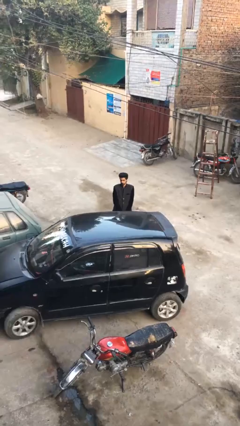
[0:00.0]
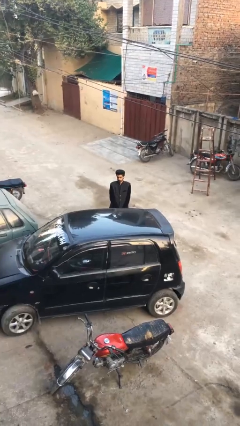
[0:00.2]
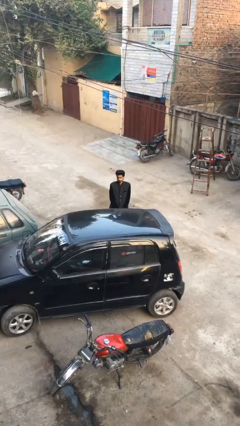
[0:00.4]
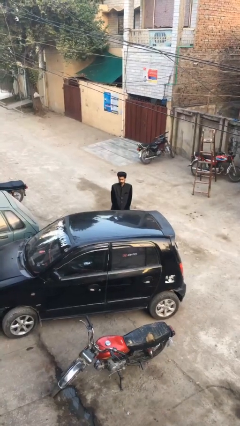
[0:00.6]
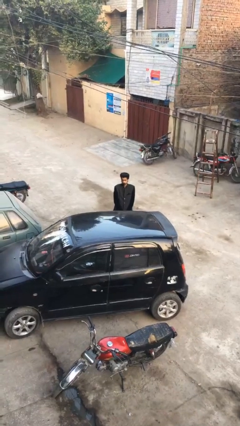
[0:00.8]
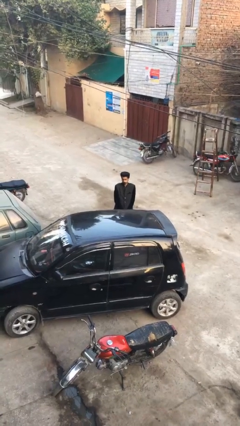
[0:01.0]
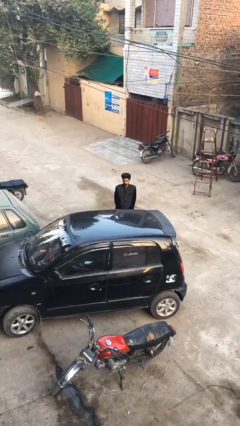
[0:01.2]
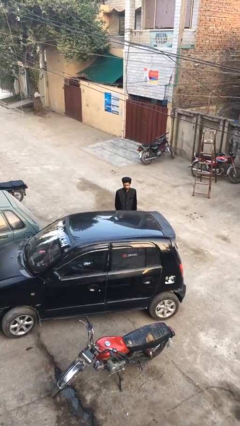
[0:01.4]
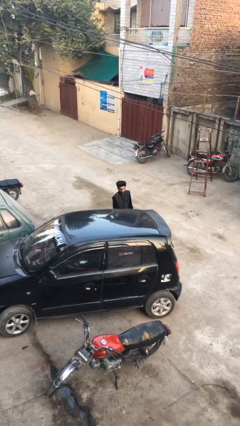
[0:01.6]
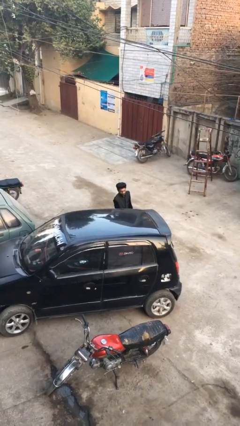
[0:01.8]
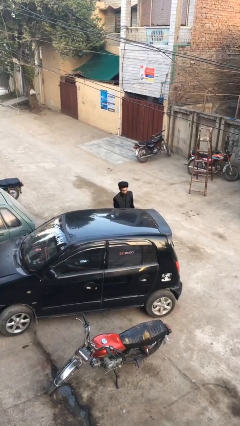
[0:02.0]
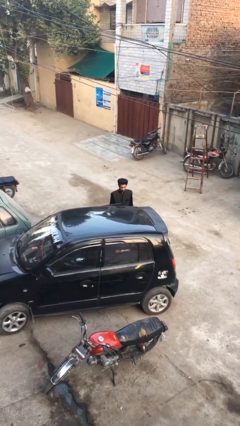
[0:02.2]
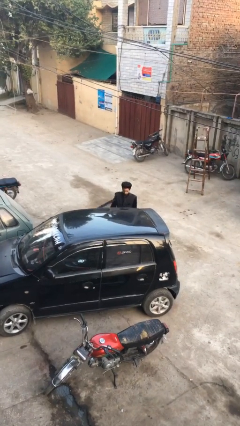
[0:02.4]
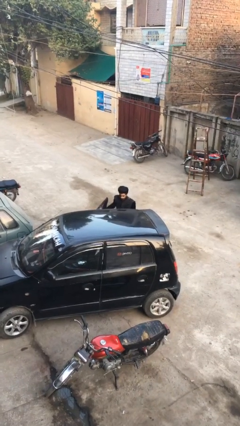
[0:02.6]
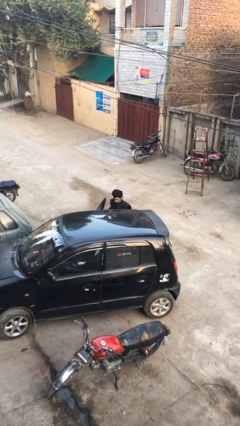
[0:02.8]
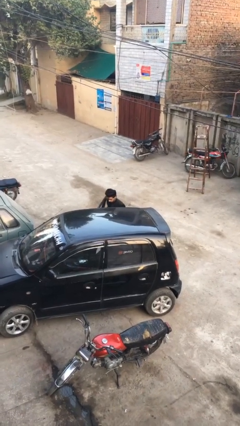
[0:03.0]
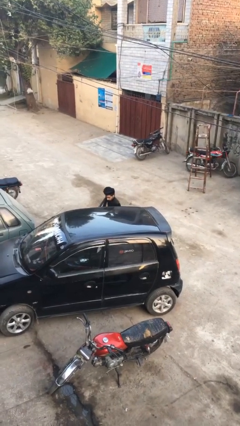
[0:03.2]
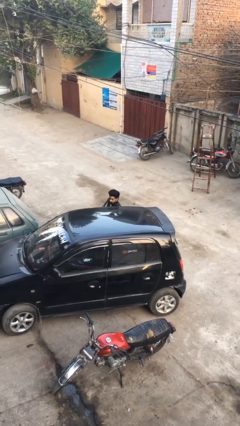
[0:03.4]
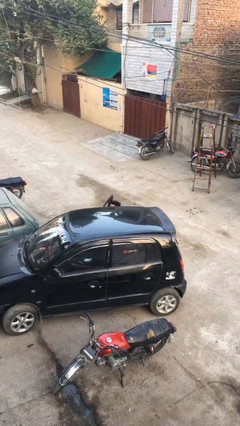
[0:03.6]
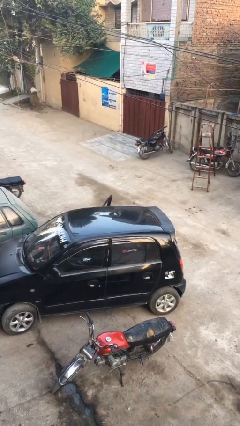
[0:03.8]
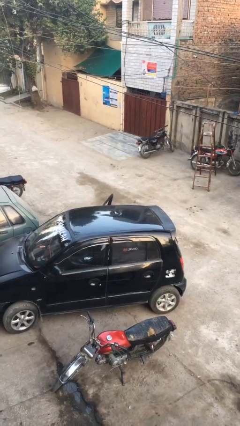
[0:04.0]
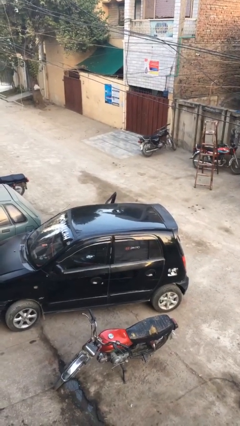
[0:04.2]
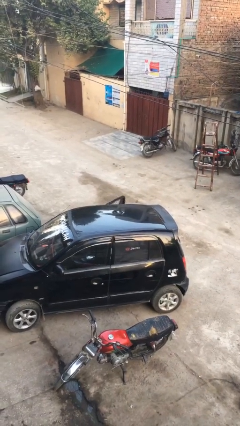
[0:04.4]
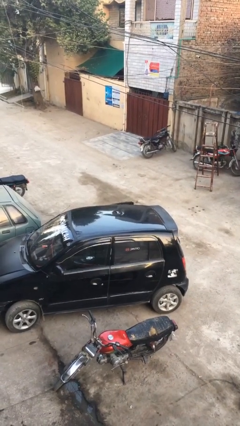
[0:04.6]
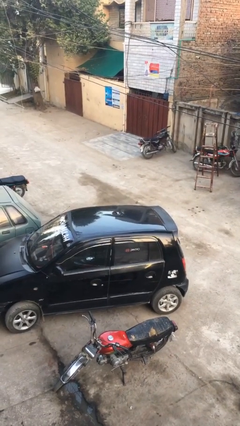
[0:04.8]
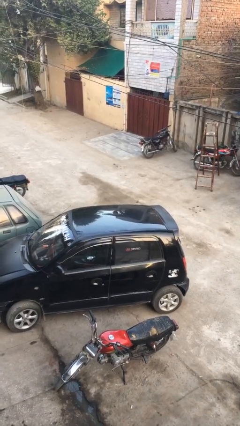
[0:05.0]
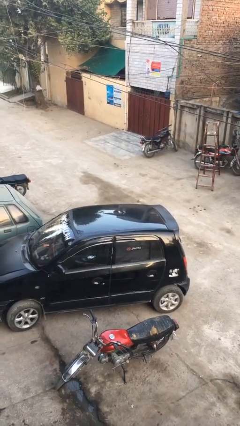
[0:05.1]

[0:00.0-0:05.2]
person enters car

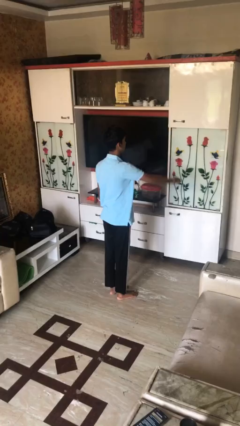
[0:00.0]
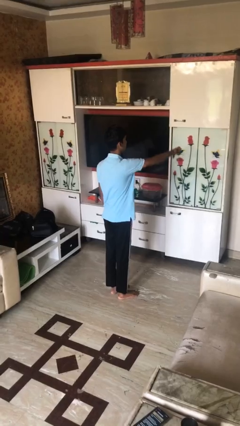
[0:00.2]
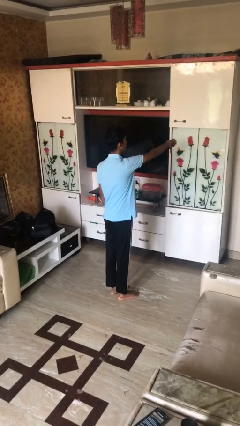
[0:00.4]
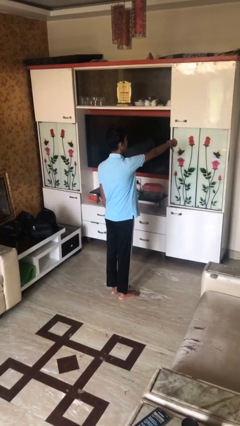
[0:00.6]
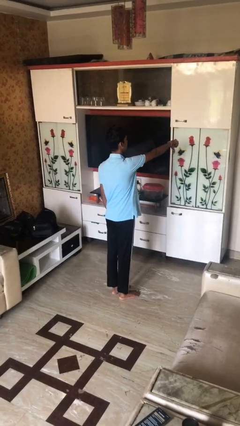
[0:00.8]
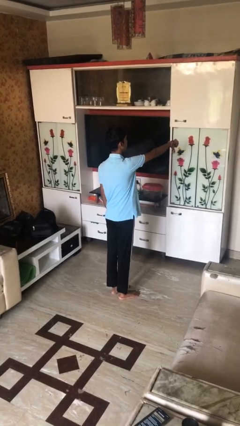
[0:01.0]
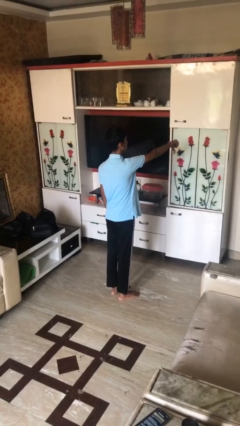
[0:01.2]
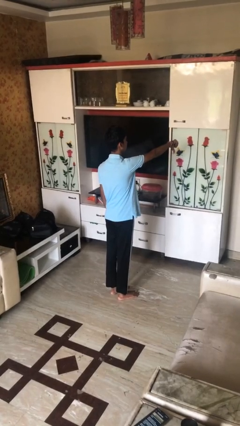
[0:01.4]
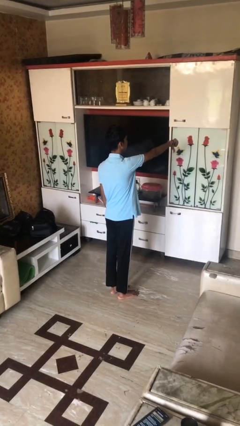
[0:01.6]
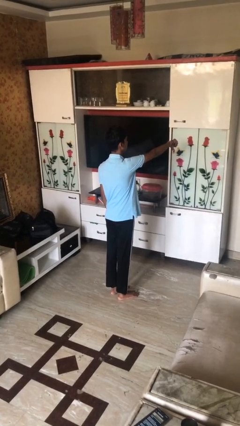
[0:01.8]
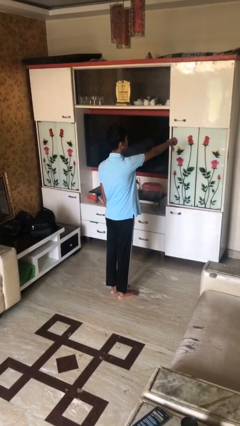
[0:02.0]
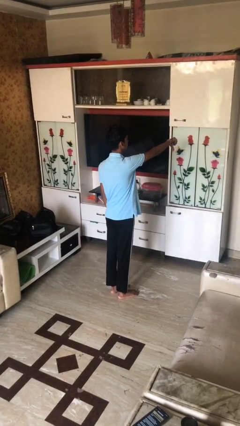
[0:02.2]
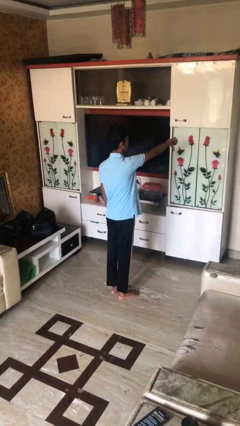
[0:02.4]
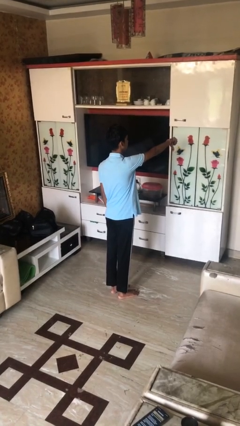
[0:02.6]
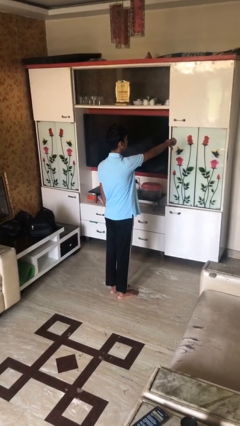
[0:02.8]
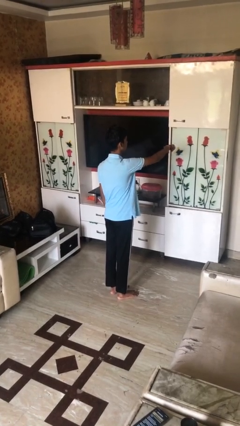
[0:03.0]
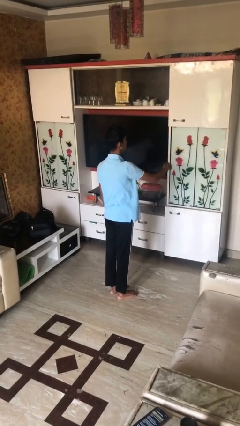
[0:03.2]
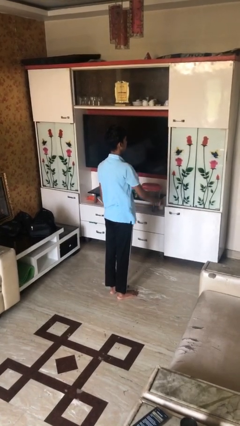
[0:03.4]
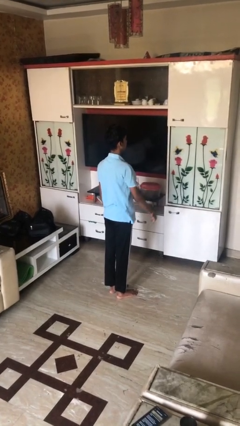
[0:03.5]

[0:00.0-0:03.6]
person gestures thumbs down

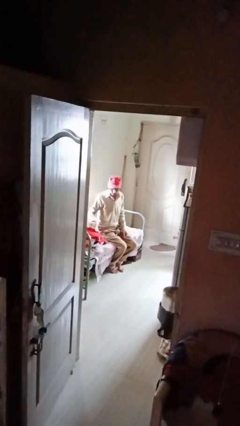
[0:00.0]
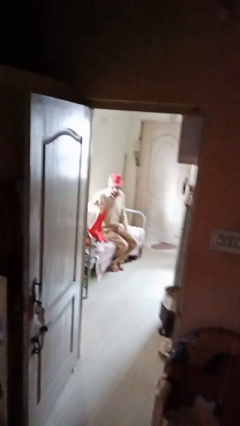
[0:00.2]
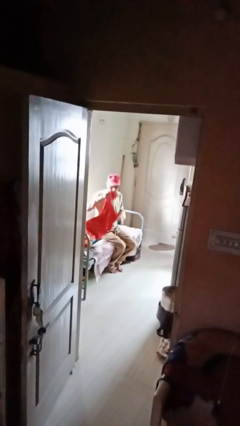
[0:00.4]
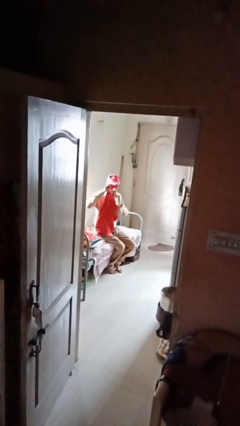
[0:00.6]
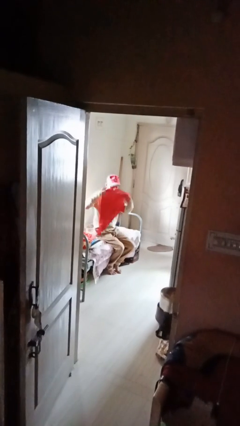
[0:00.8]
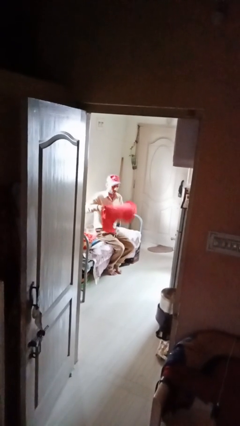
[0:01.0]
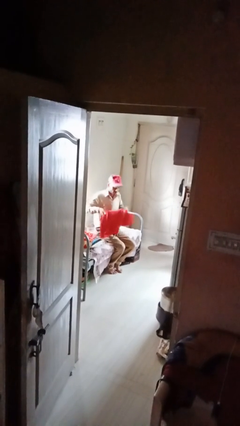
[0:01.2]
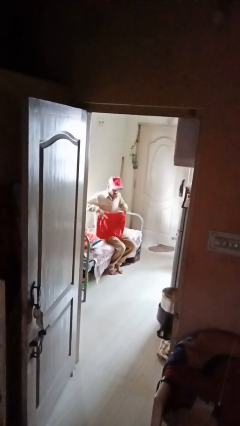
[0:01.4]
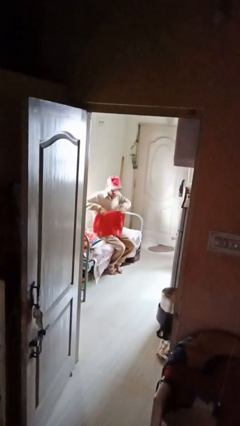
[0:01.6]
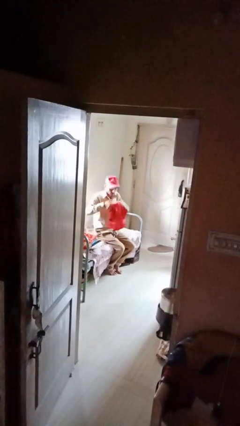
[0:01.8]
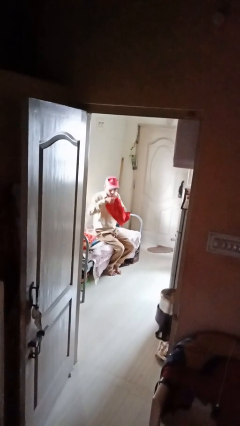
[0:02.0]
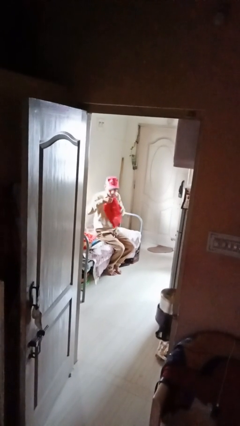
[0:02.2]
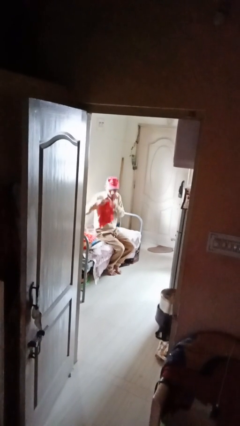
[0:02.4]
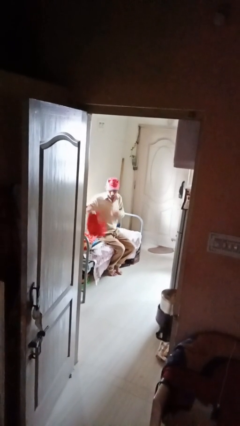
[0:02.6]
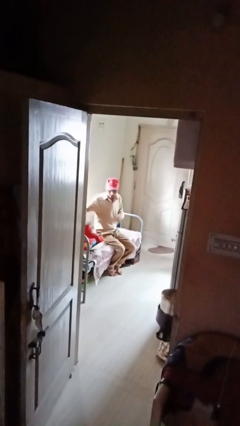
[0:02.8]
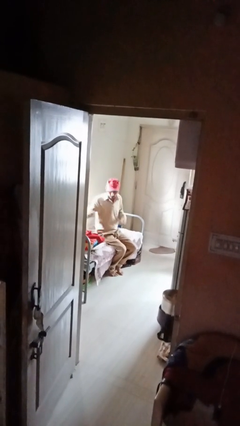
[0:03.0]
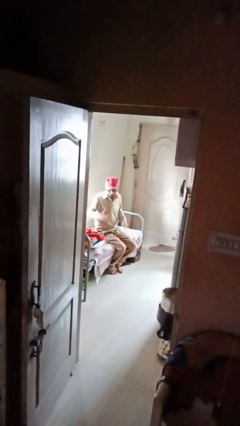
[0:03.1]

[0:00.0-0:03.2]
person folds shirt

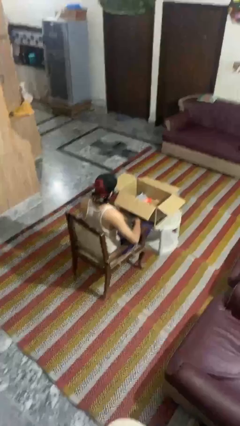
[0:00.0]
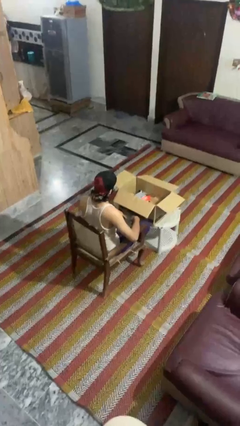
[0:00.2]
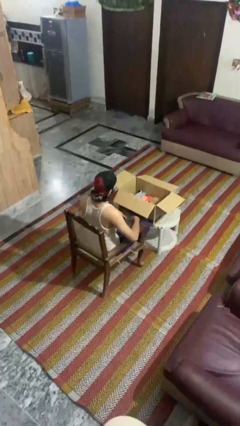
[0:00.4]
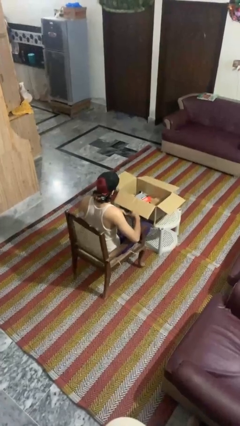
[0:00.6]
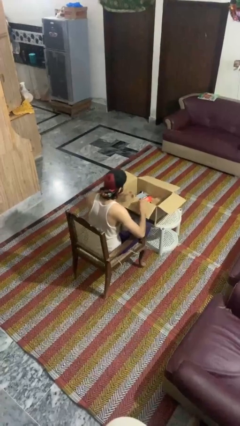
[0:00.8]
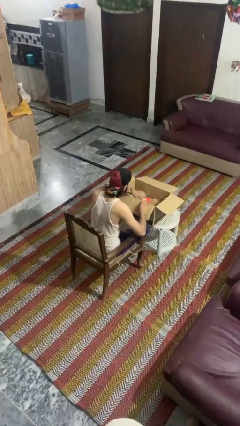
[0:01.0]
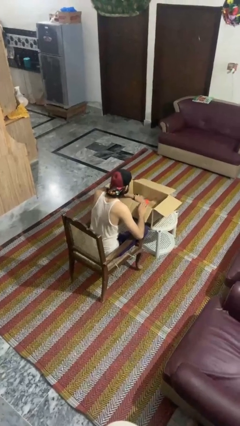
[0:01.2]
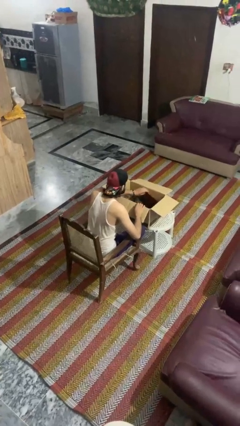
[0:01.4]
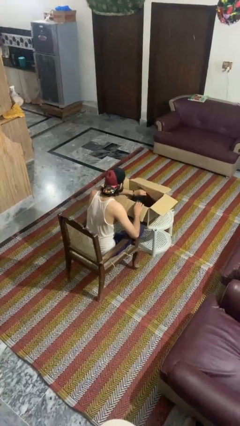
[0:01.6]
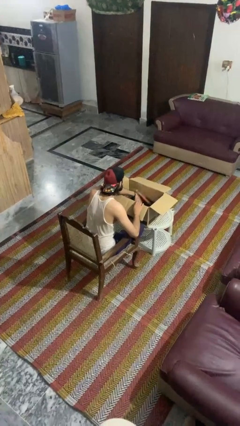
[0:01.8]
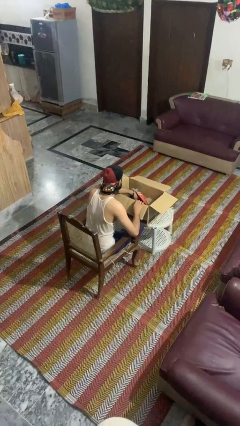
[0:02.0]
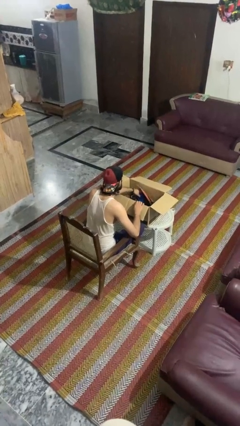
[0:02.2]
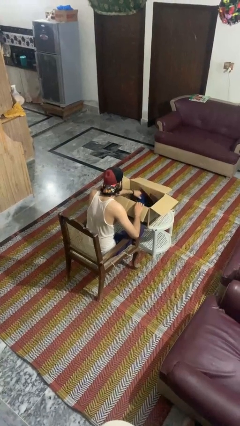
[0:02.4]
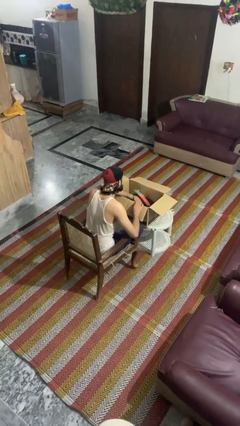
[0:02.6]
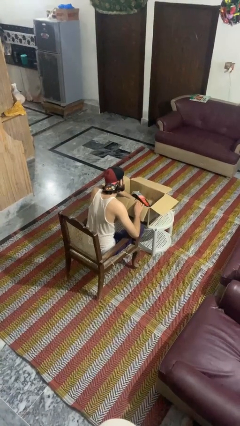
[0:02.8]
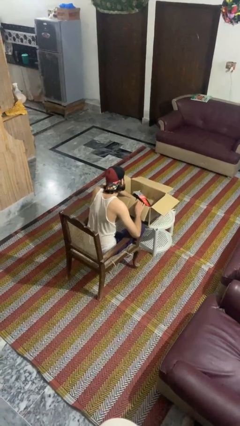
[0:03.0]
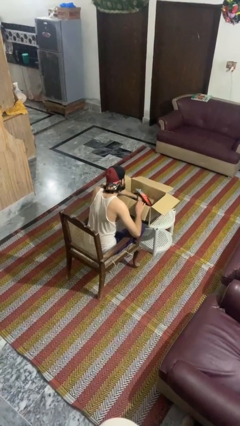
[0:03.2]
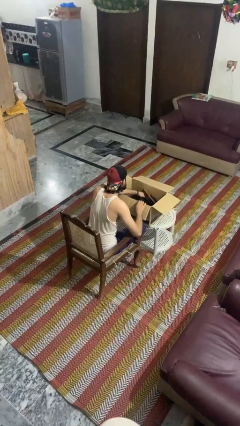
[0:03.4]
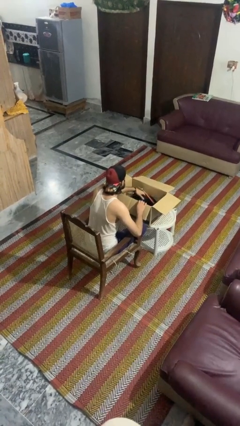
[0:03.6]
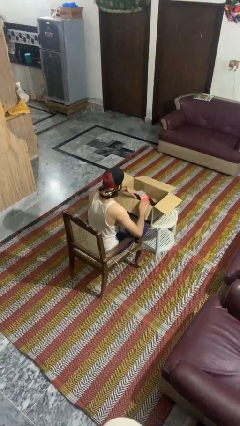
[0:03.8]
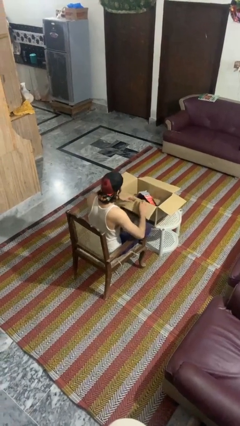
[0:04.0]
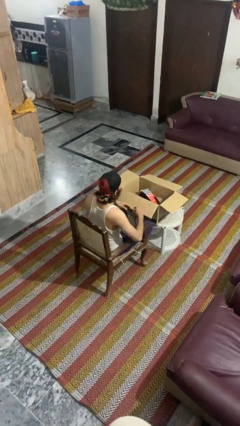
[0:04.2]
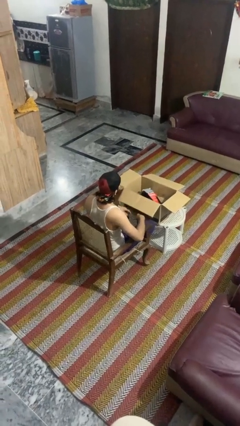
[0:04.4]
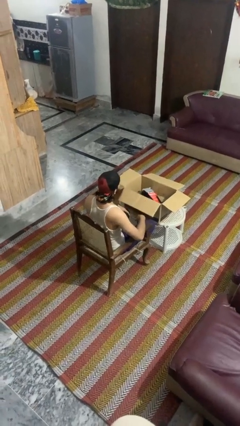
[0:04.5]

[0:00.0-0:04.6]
person searches in box

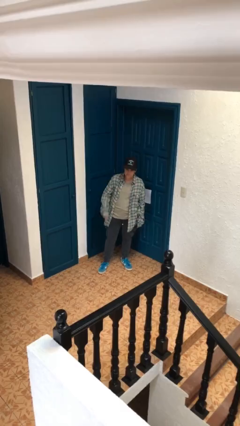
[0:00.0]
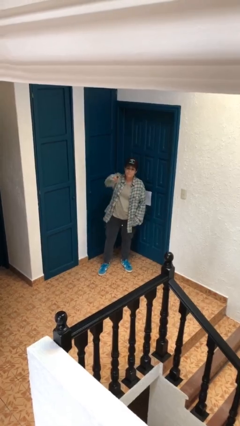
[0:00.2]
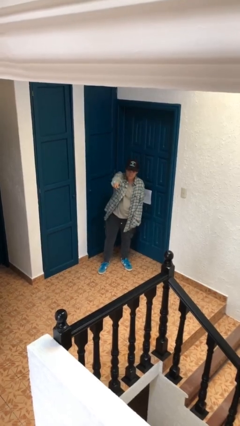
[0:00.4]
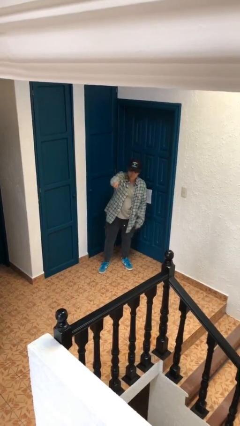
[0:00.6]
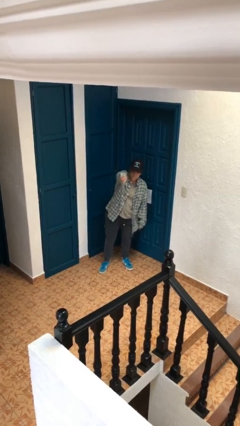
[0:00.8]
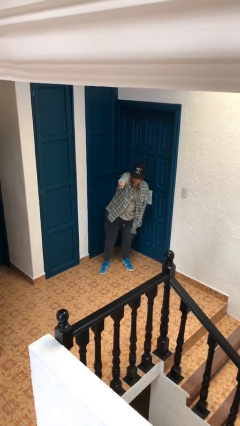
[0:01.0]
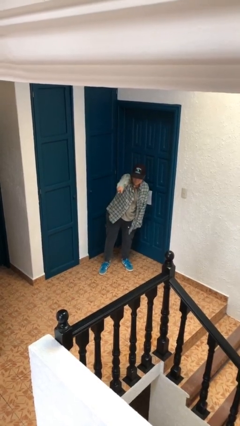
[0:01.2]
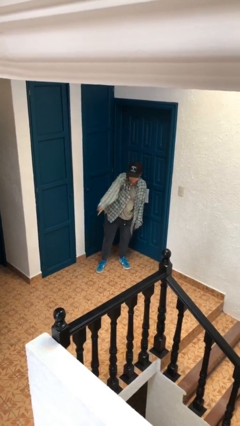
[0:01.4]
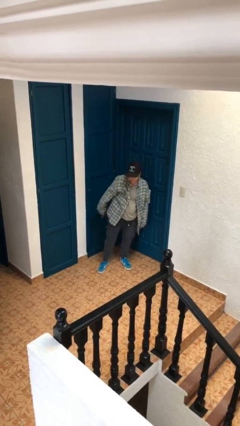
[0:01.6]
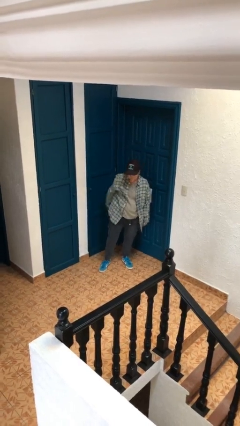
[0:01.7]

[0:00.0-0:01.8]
person points at person
